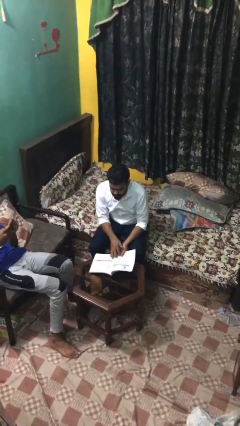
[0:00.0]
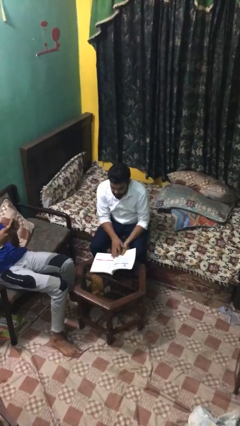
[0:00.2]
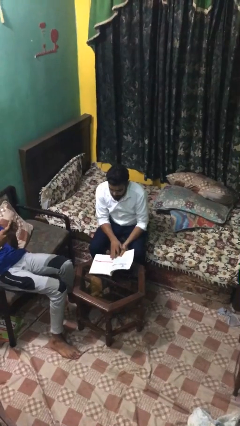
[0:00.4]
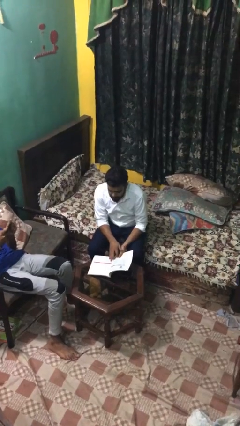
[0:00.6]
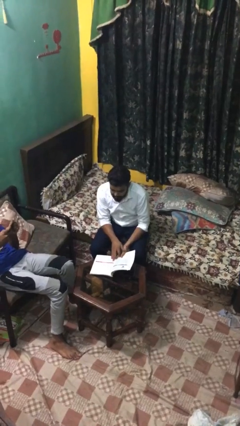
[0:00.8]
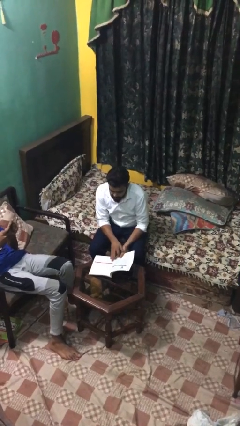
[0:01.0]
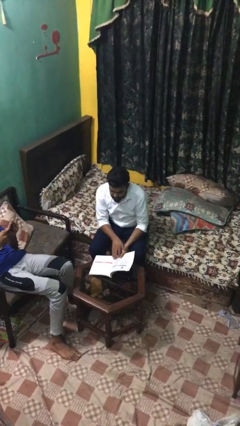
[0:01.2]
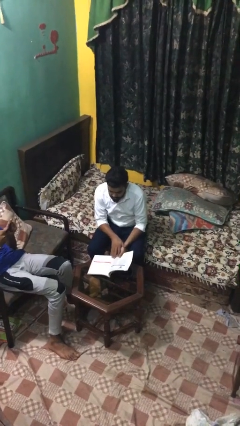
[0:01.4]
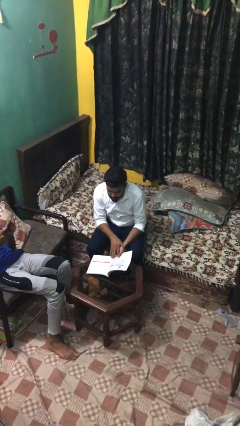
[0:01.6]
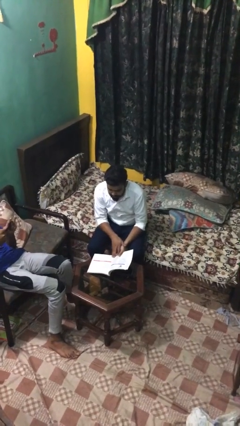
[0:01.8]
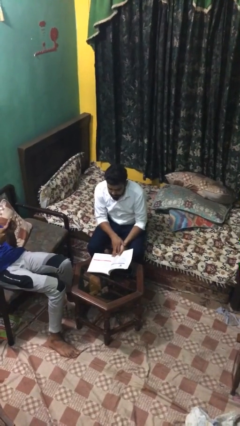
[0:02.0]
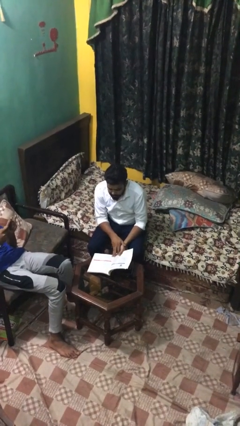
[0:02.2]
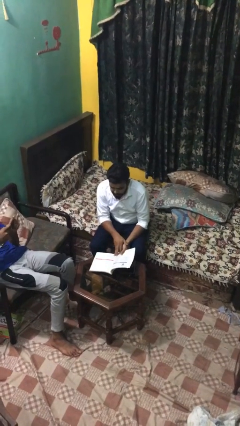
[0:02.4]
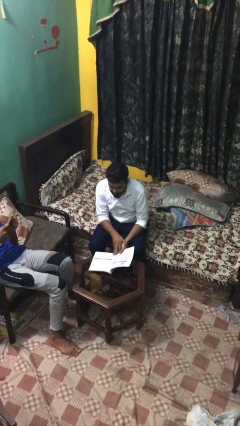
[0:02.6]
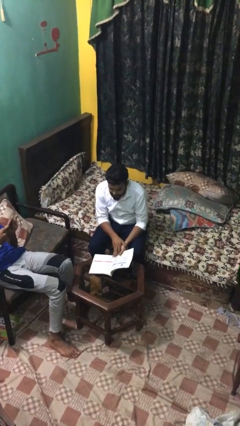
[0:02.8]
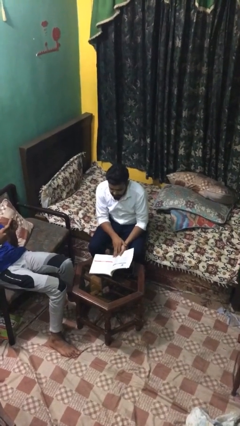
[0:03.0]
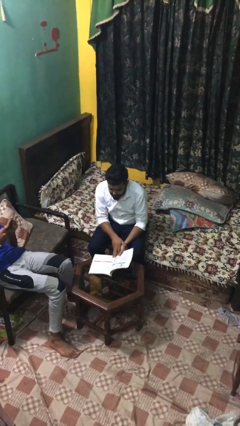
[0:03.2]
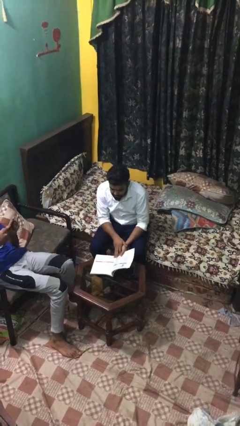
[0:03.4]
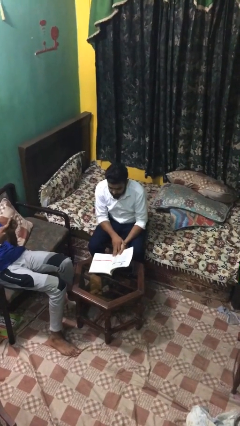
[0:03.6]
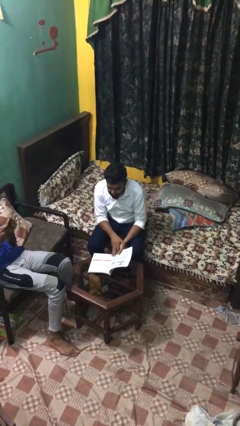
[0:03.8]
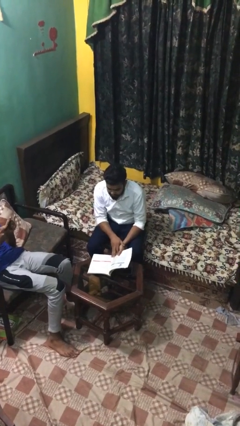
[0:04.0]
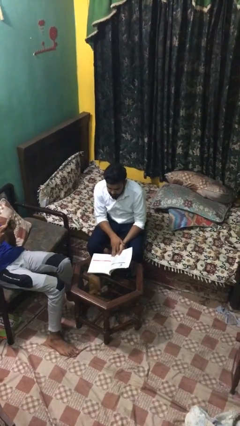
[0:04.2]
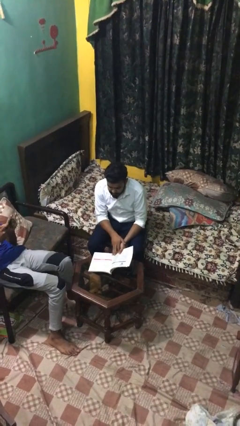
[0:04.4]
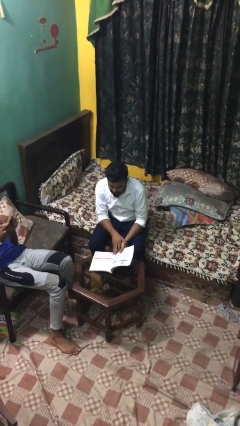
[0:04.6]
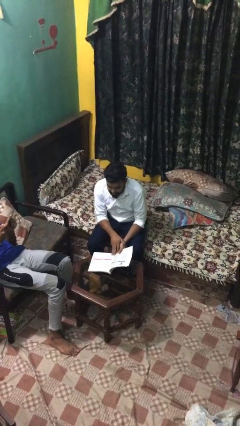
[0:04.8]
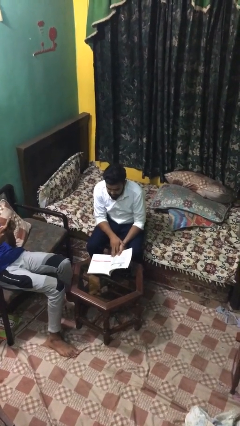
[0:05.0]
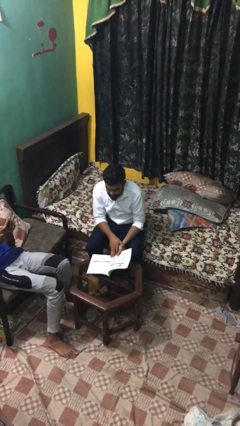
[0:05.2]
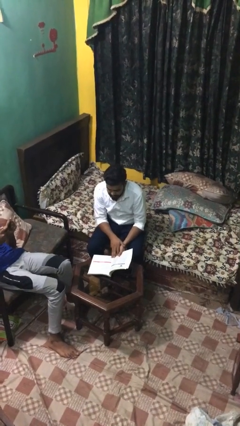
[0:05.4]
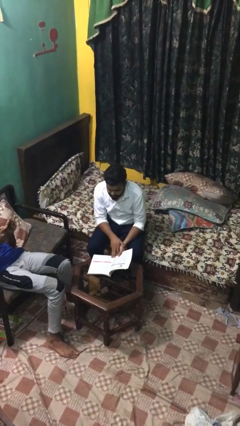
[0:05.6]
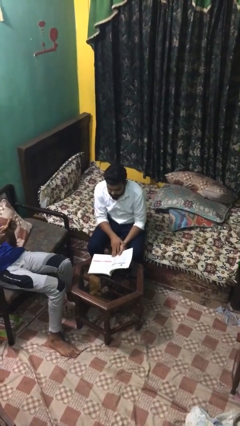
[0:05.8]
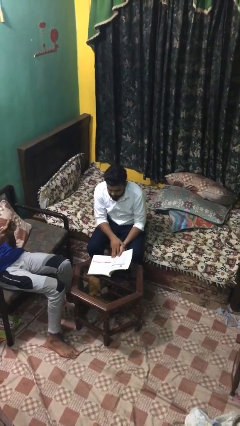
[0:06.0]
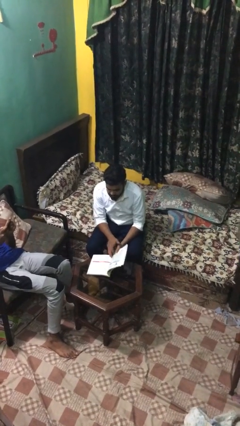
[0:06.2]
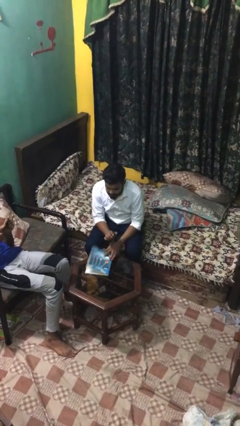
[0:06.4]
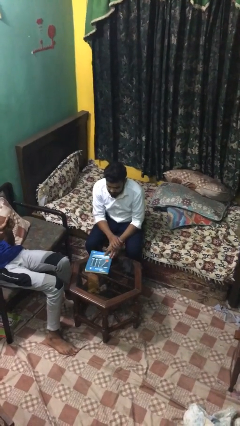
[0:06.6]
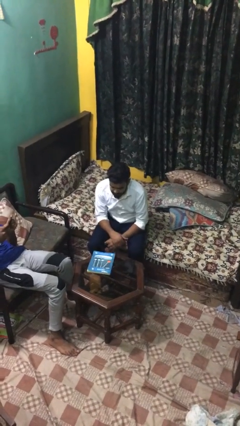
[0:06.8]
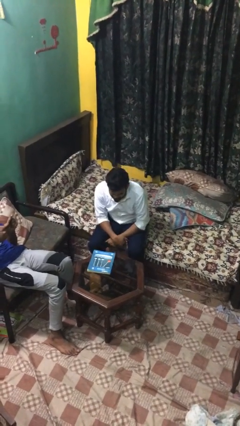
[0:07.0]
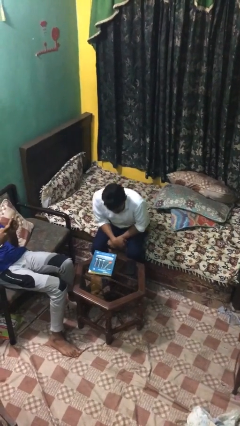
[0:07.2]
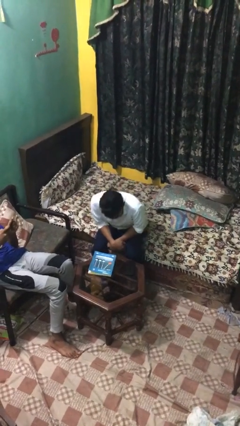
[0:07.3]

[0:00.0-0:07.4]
person reads document

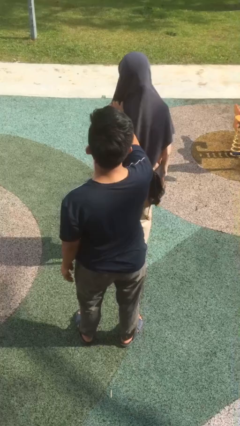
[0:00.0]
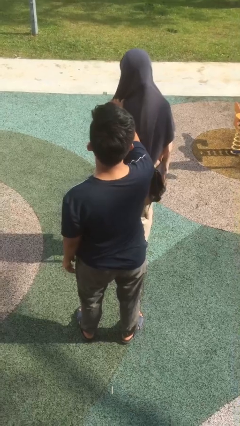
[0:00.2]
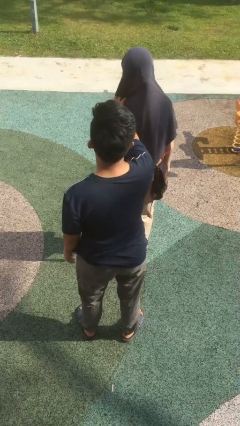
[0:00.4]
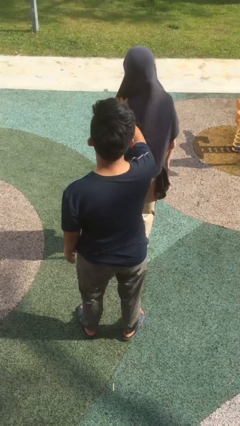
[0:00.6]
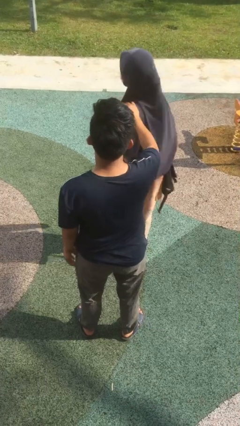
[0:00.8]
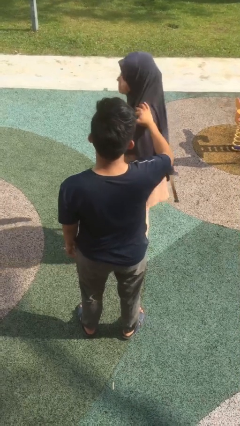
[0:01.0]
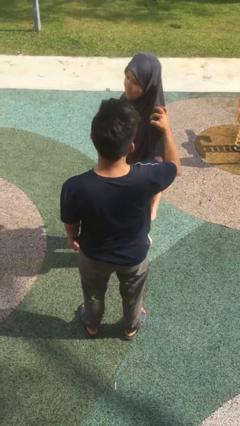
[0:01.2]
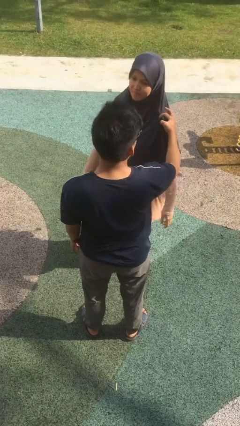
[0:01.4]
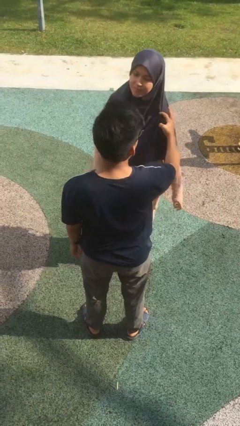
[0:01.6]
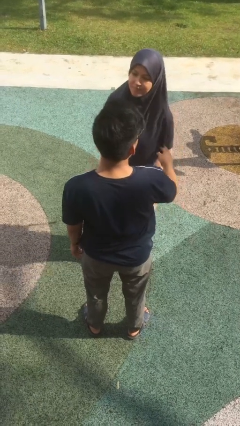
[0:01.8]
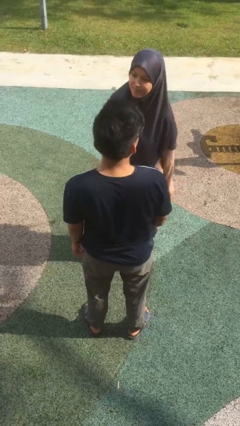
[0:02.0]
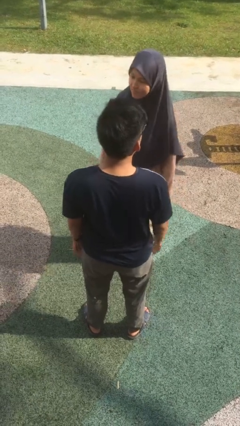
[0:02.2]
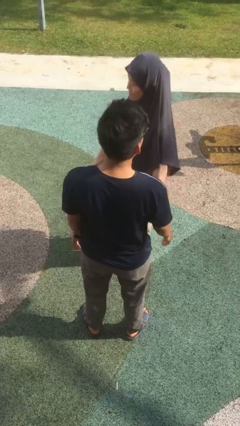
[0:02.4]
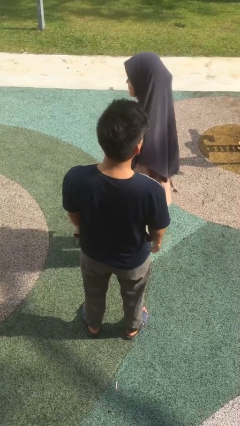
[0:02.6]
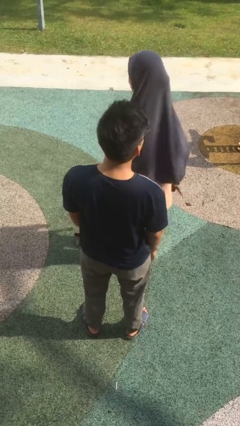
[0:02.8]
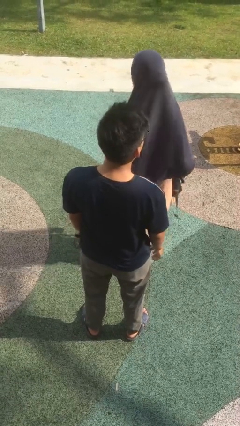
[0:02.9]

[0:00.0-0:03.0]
person spins person around

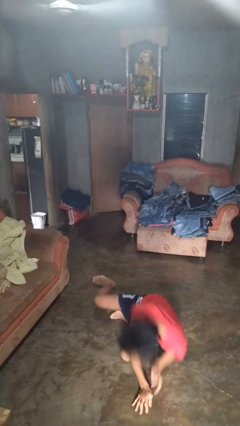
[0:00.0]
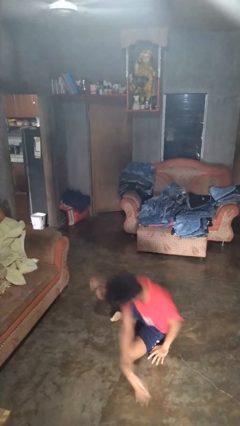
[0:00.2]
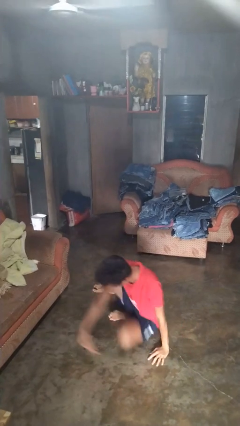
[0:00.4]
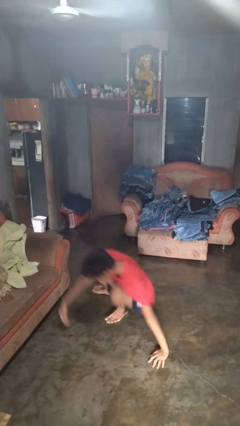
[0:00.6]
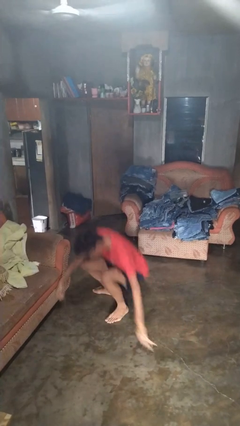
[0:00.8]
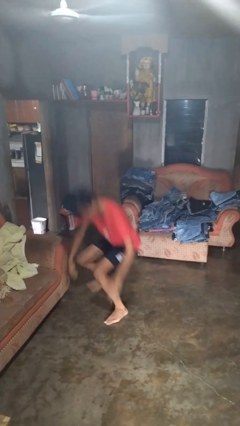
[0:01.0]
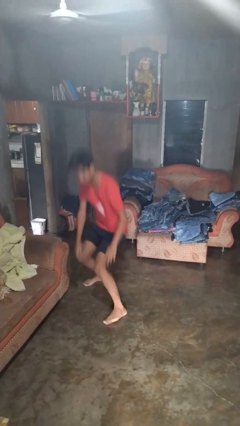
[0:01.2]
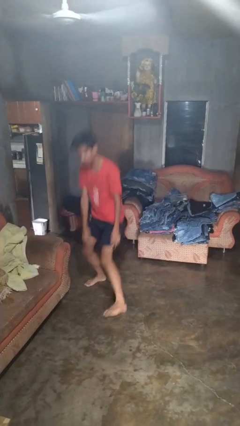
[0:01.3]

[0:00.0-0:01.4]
person stands up from floor

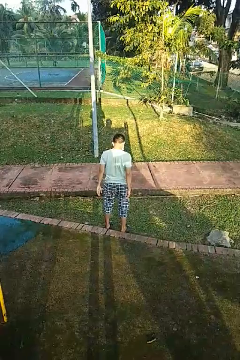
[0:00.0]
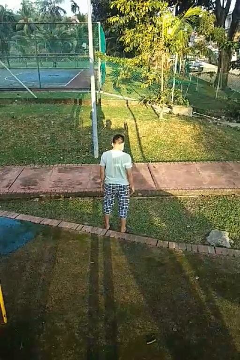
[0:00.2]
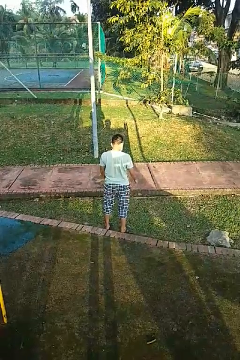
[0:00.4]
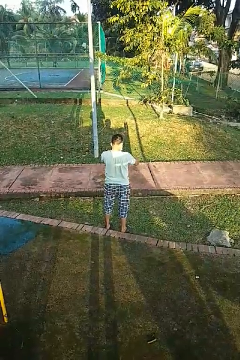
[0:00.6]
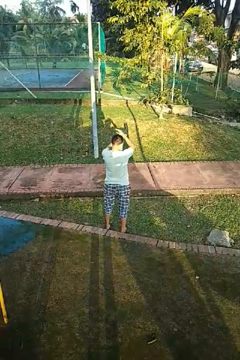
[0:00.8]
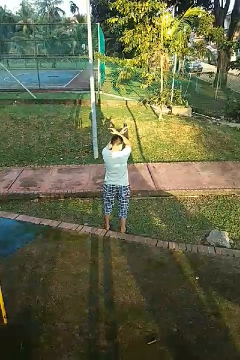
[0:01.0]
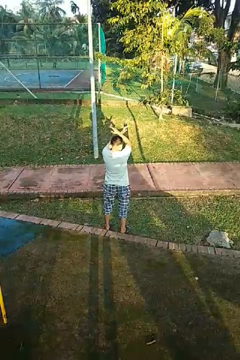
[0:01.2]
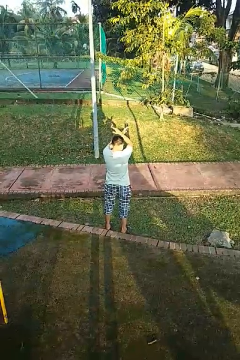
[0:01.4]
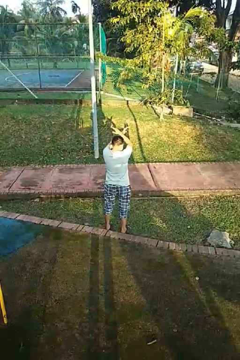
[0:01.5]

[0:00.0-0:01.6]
person gestures arms x

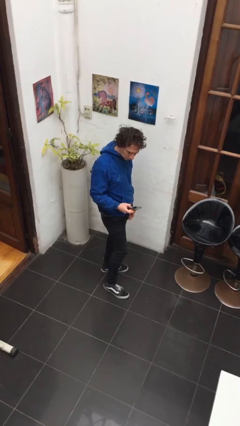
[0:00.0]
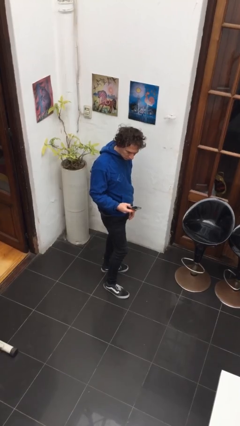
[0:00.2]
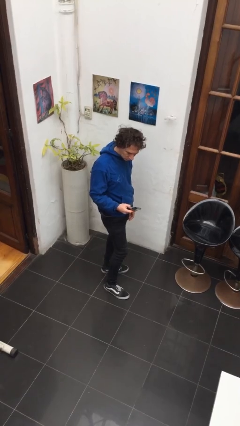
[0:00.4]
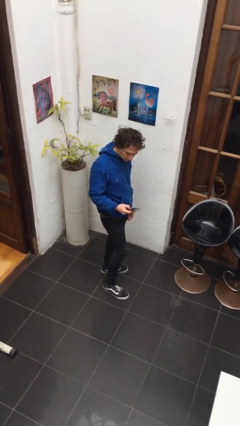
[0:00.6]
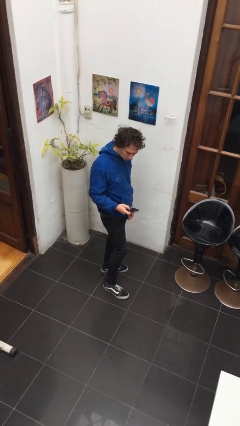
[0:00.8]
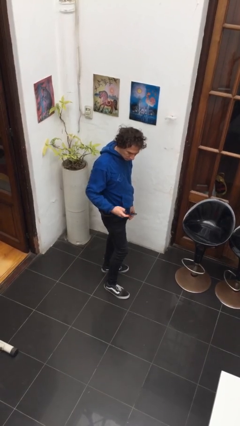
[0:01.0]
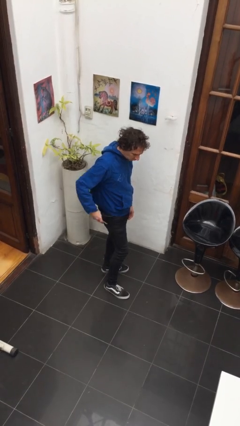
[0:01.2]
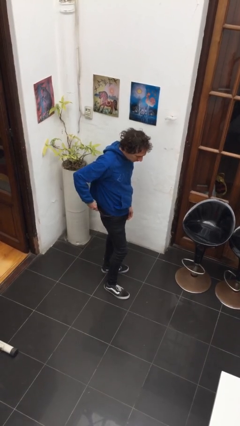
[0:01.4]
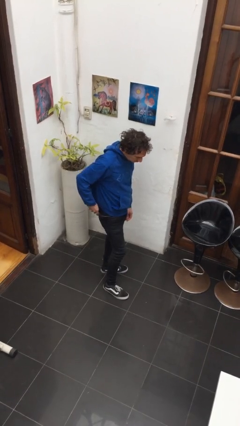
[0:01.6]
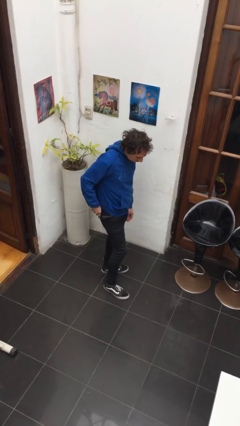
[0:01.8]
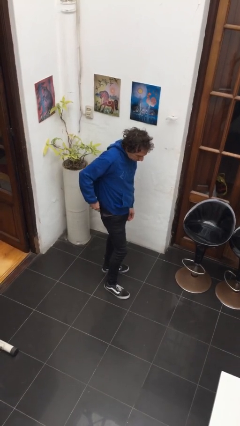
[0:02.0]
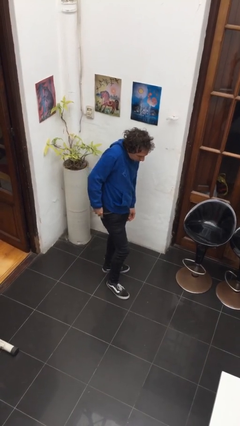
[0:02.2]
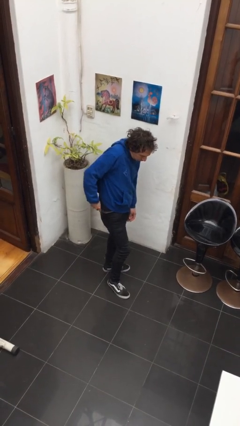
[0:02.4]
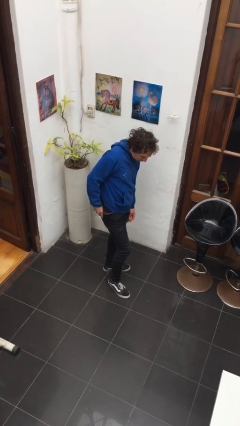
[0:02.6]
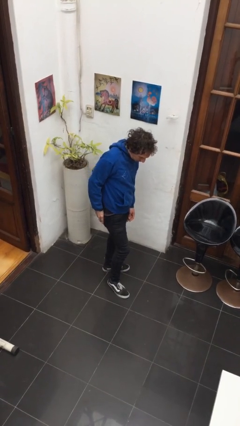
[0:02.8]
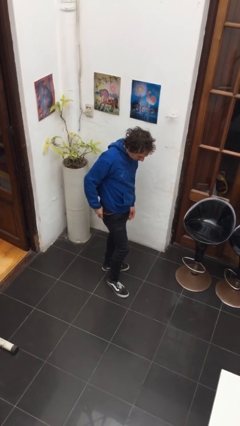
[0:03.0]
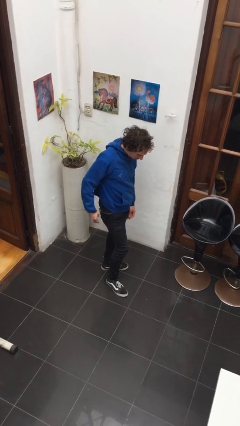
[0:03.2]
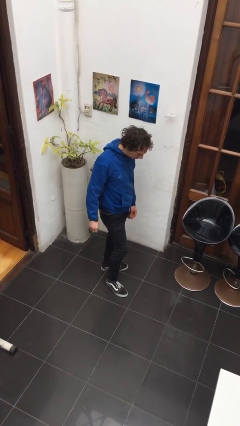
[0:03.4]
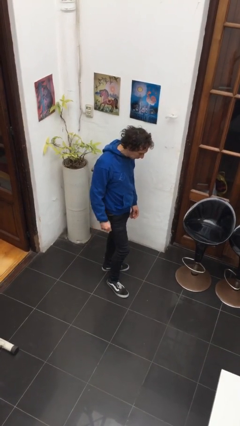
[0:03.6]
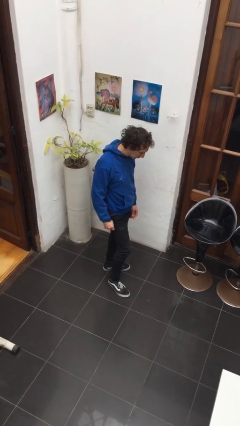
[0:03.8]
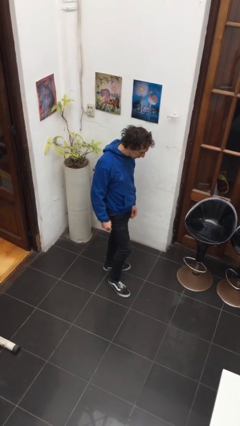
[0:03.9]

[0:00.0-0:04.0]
person puts phone into pocket
